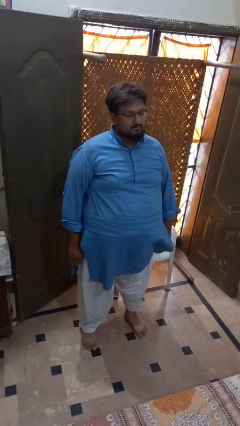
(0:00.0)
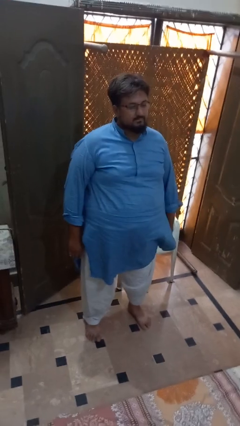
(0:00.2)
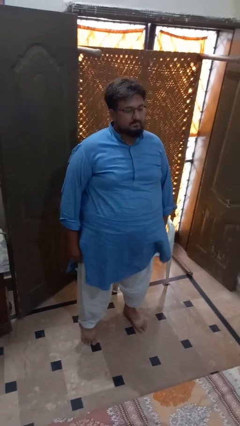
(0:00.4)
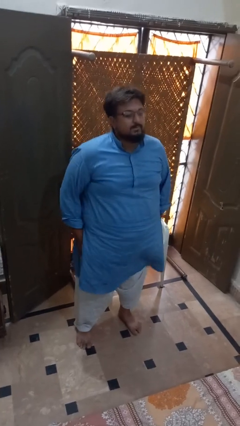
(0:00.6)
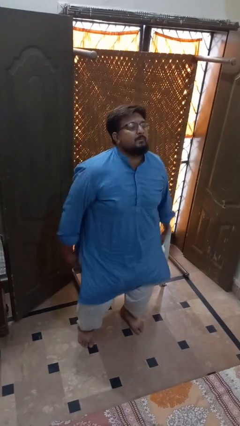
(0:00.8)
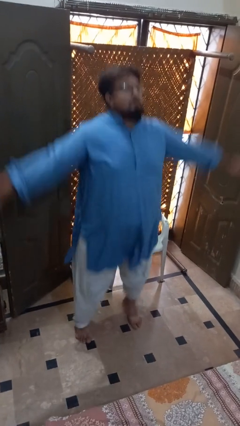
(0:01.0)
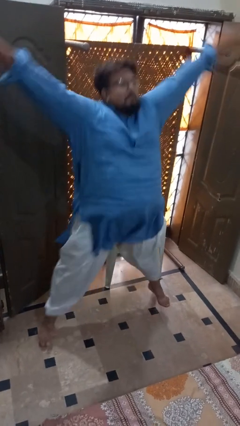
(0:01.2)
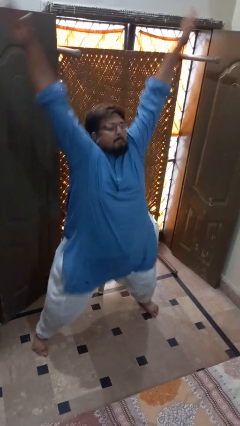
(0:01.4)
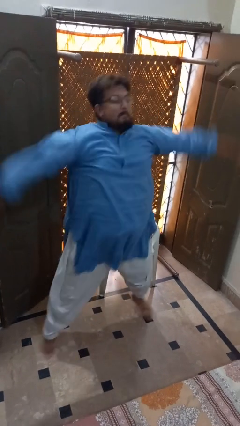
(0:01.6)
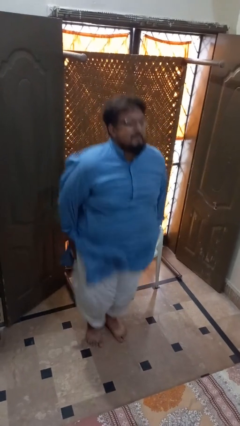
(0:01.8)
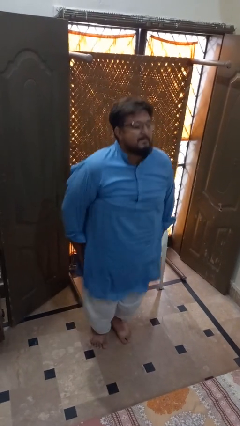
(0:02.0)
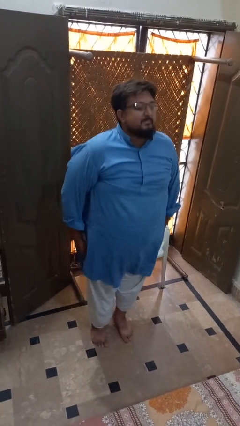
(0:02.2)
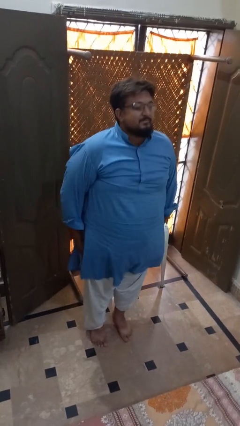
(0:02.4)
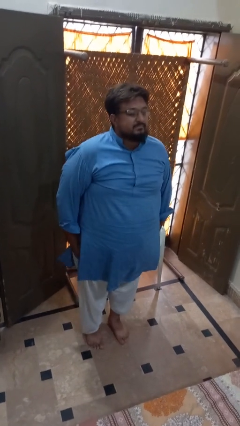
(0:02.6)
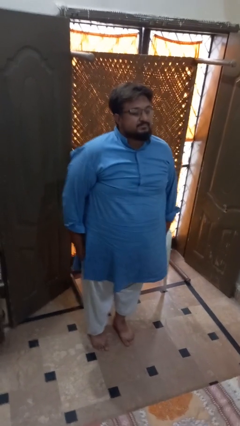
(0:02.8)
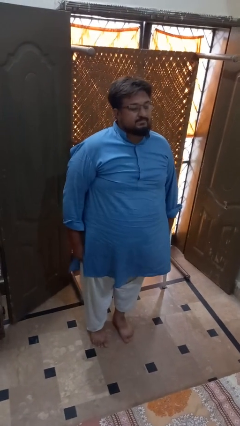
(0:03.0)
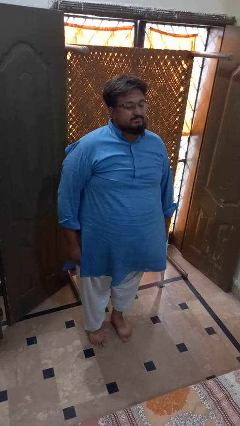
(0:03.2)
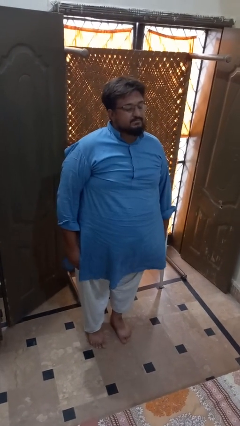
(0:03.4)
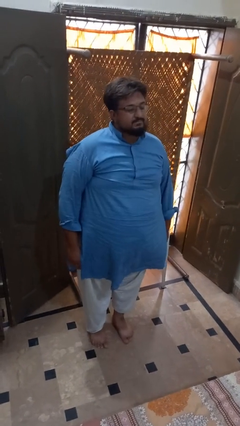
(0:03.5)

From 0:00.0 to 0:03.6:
person exercises with jumping jacks

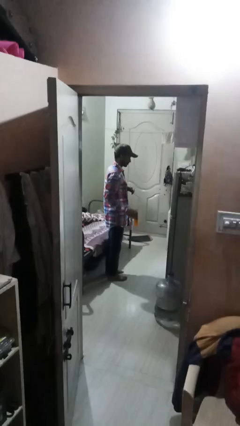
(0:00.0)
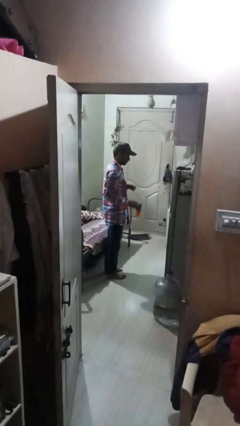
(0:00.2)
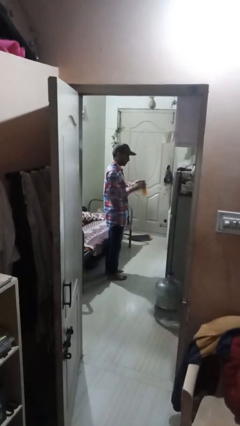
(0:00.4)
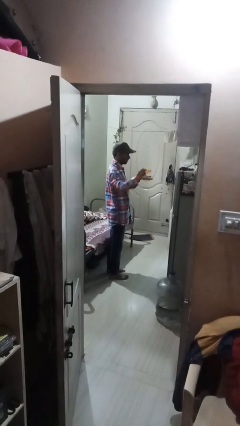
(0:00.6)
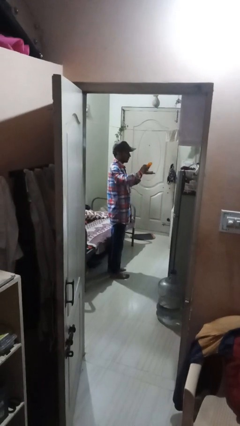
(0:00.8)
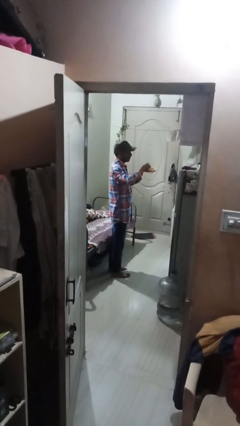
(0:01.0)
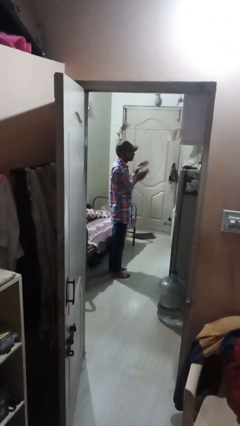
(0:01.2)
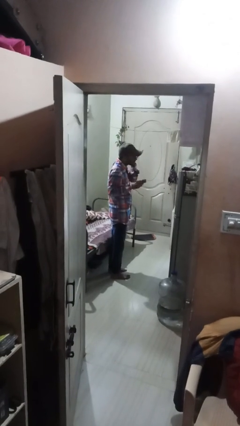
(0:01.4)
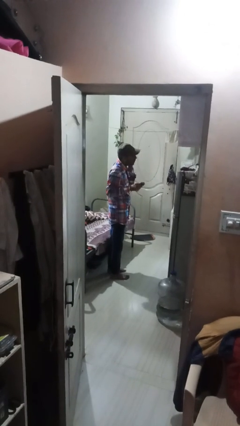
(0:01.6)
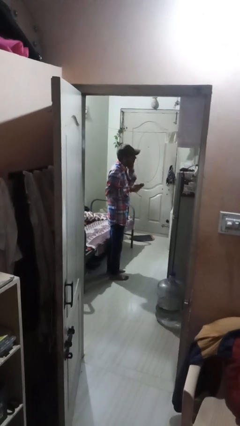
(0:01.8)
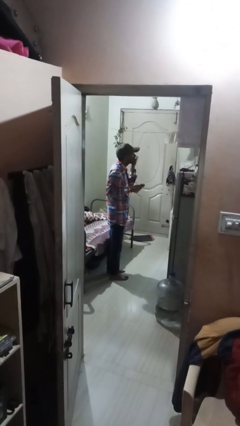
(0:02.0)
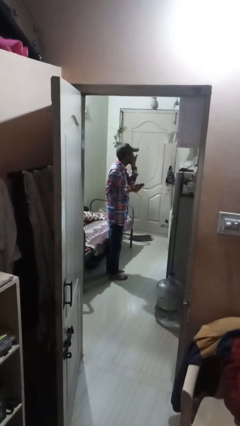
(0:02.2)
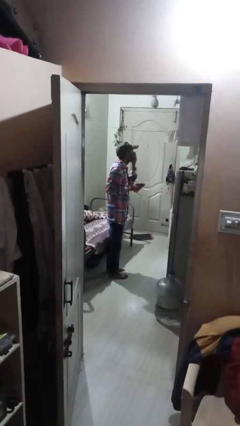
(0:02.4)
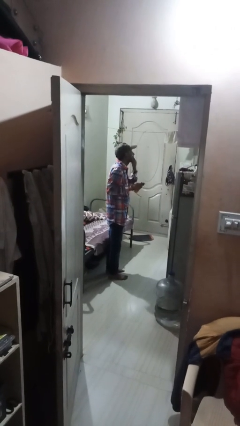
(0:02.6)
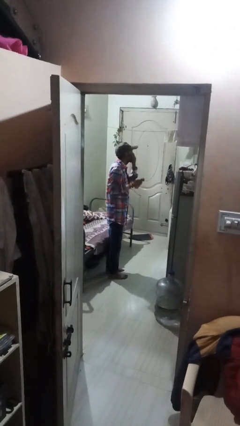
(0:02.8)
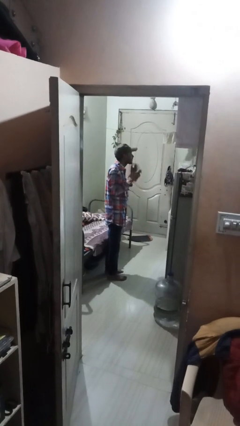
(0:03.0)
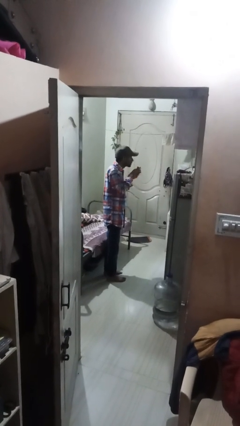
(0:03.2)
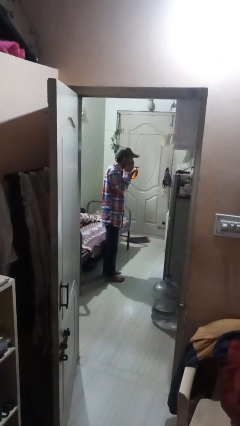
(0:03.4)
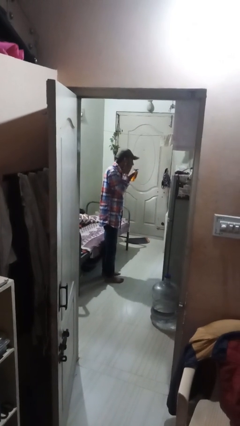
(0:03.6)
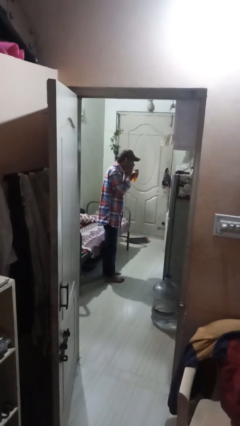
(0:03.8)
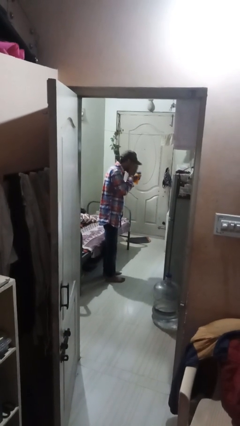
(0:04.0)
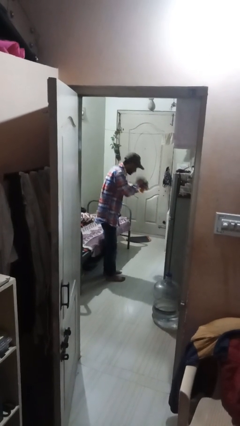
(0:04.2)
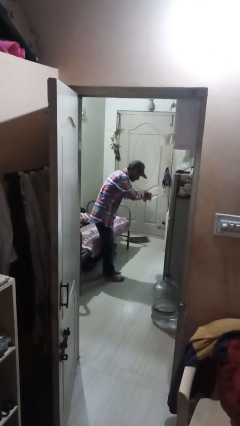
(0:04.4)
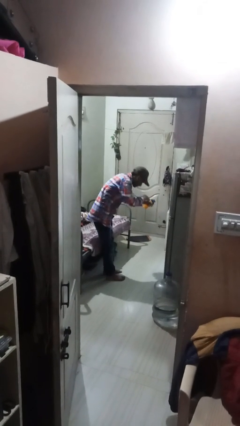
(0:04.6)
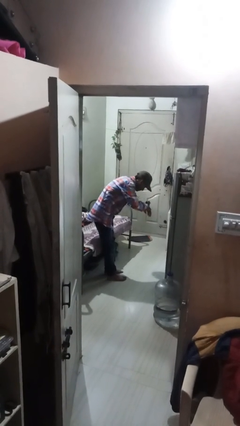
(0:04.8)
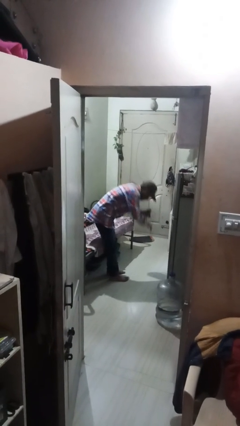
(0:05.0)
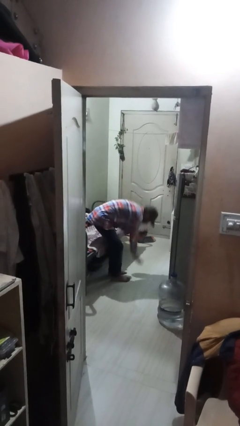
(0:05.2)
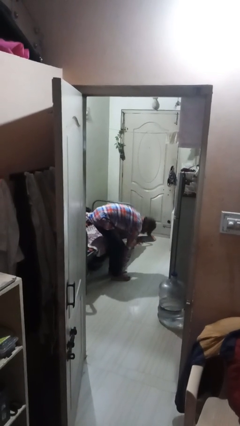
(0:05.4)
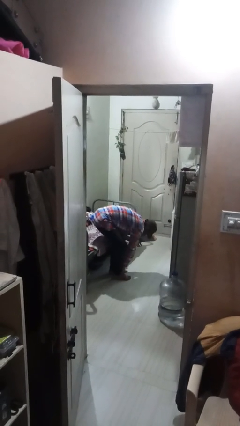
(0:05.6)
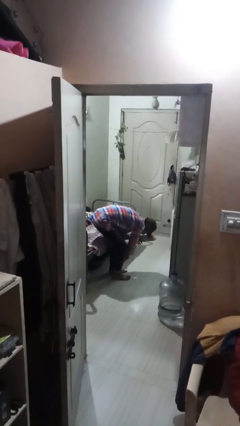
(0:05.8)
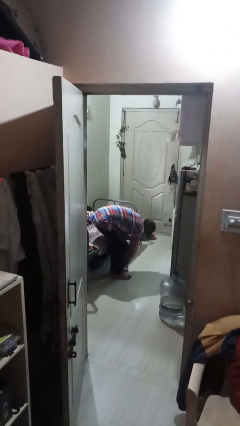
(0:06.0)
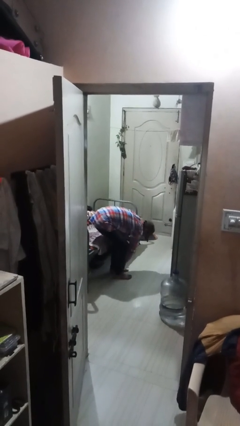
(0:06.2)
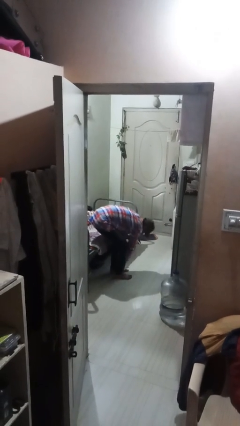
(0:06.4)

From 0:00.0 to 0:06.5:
person applies sunscreen

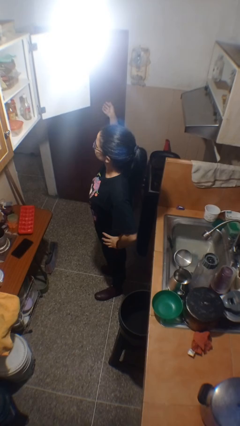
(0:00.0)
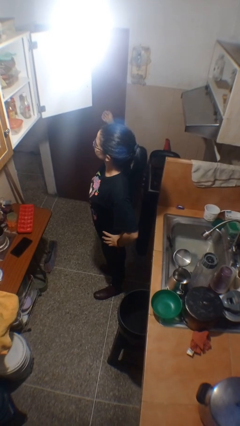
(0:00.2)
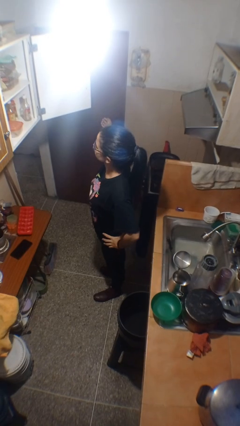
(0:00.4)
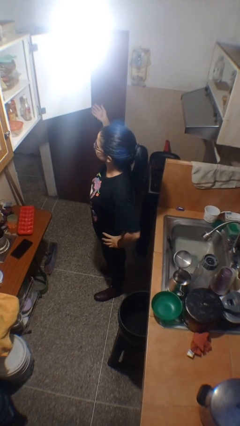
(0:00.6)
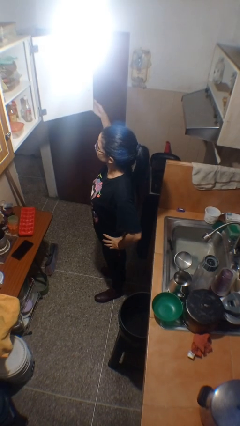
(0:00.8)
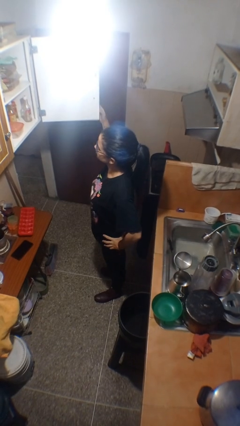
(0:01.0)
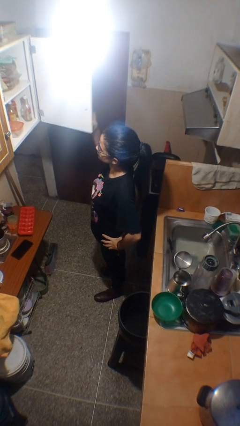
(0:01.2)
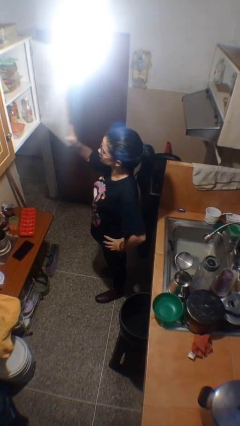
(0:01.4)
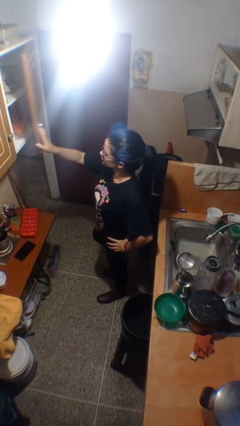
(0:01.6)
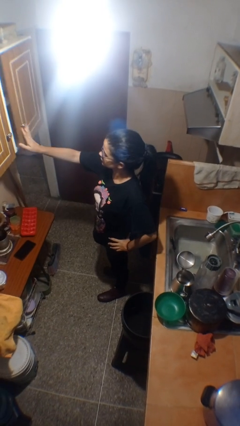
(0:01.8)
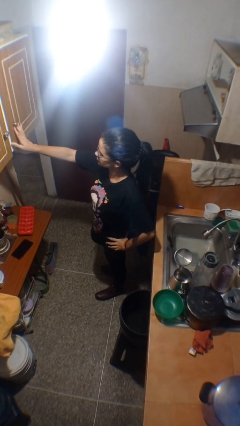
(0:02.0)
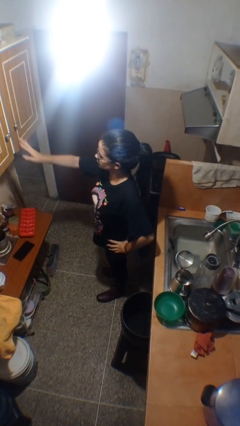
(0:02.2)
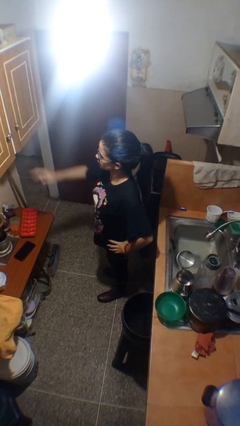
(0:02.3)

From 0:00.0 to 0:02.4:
person closes cabinet

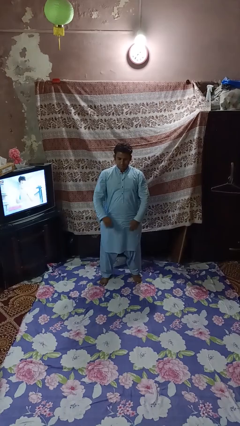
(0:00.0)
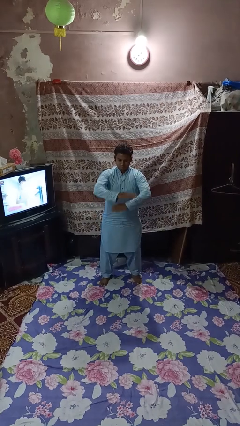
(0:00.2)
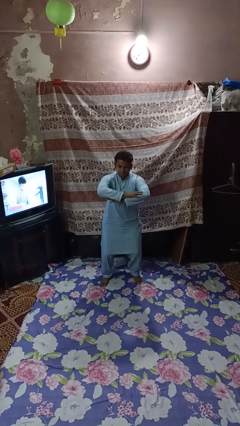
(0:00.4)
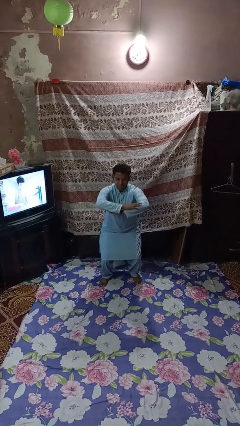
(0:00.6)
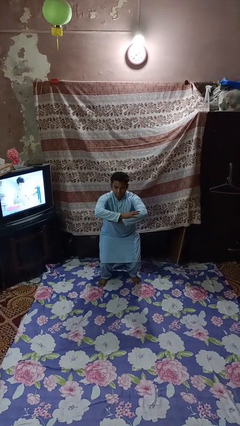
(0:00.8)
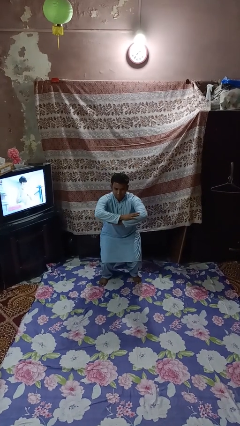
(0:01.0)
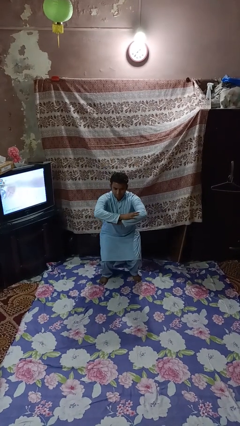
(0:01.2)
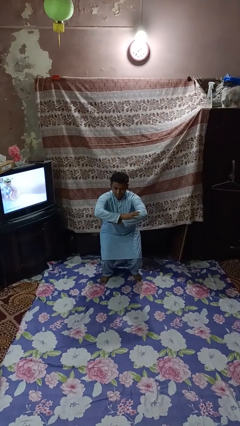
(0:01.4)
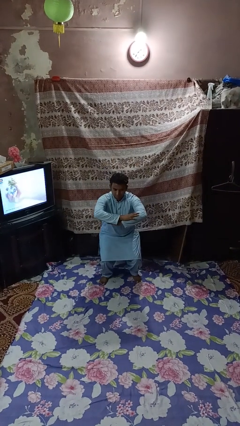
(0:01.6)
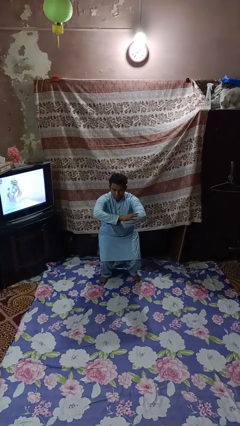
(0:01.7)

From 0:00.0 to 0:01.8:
person squats

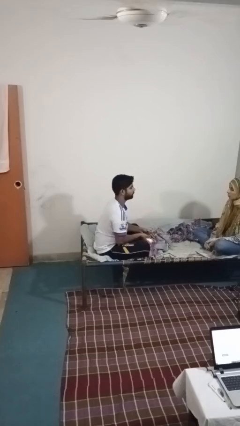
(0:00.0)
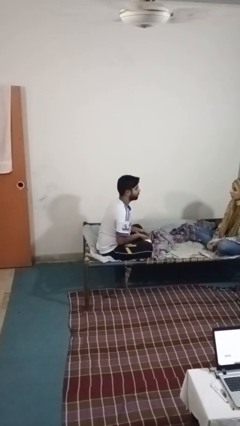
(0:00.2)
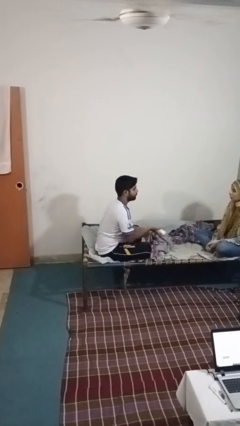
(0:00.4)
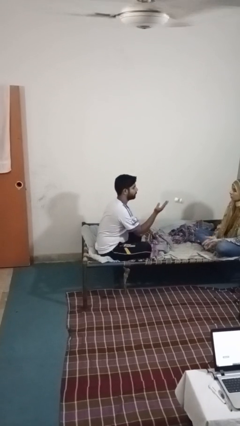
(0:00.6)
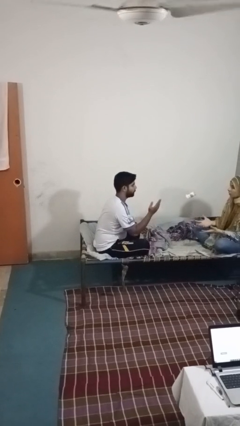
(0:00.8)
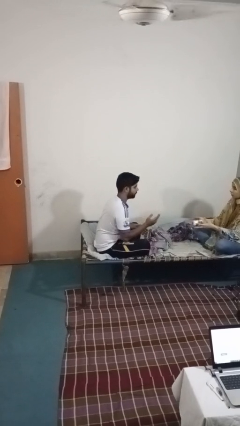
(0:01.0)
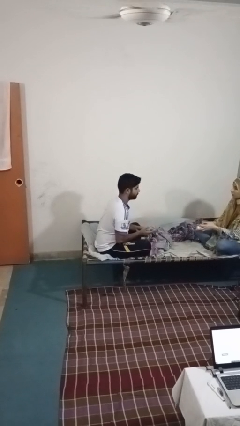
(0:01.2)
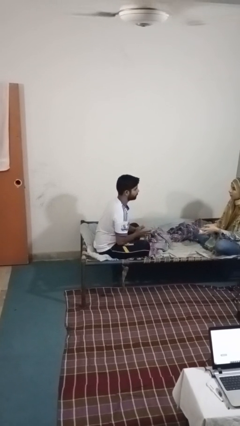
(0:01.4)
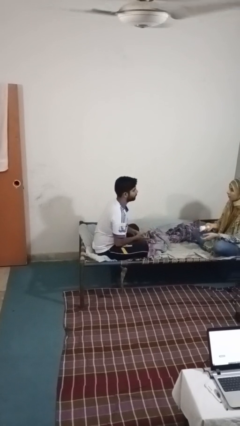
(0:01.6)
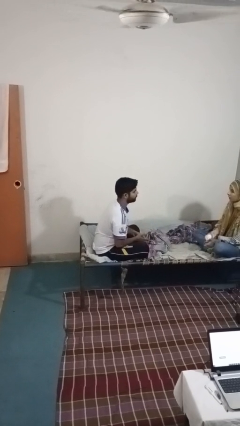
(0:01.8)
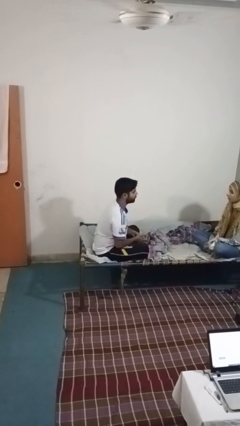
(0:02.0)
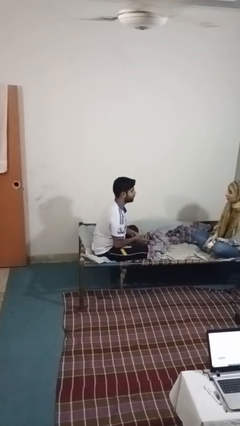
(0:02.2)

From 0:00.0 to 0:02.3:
person throws object to person

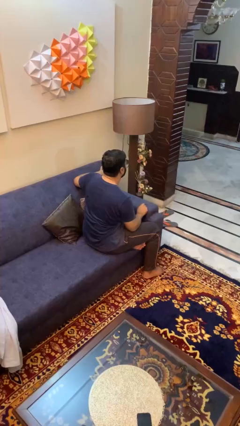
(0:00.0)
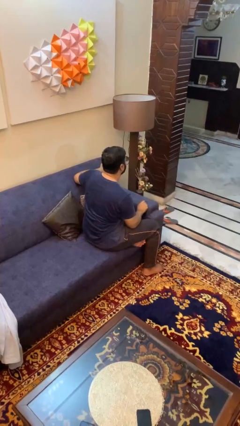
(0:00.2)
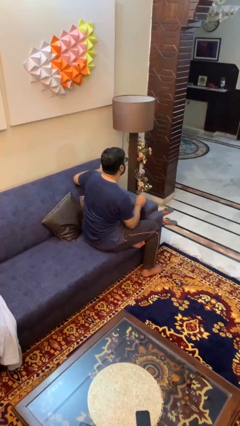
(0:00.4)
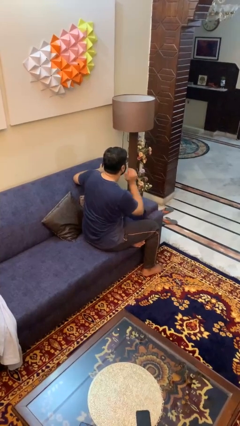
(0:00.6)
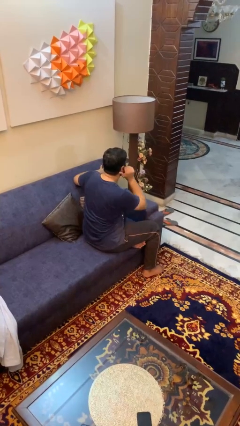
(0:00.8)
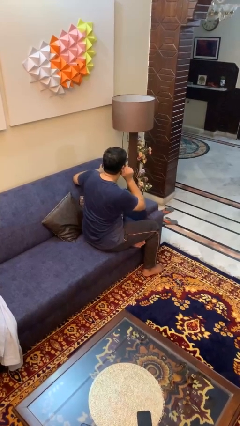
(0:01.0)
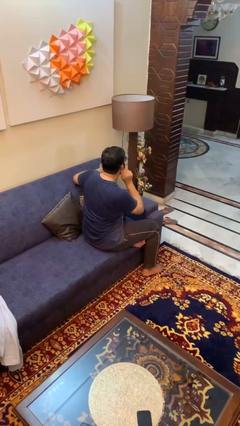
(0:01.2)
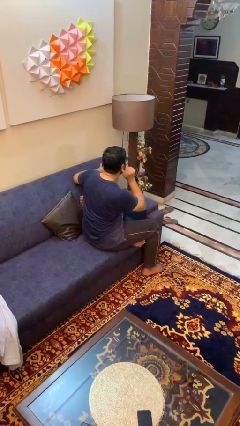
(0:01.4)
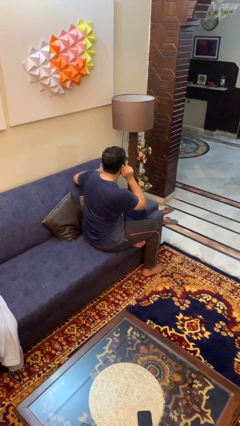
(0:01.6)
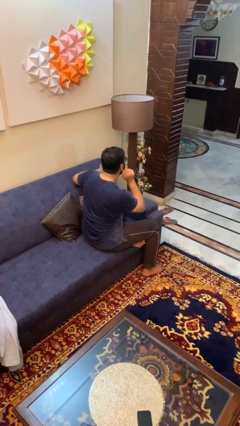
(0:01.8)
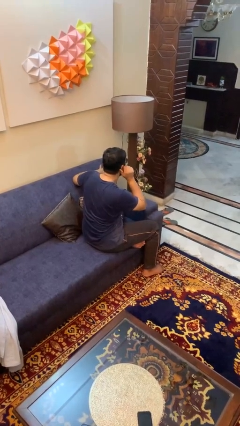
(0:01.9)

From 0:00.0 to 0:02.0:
person touches earlobe
